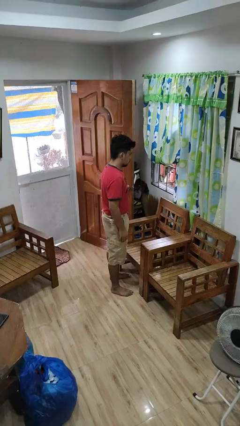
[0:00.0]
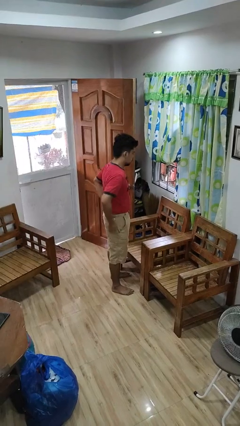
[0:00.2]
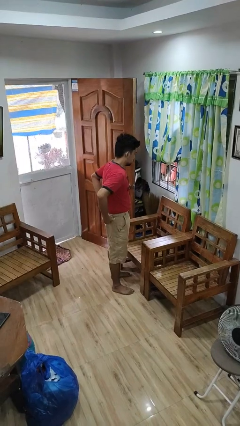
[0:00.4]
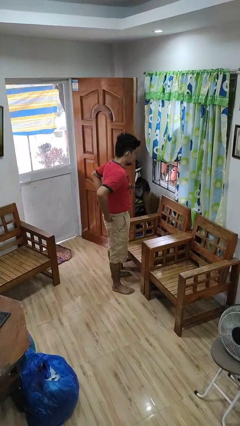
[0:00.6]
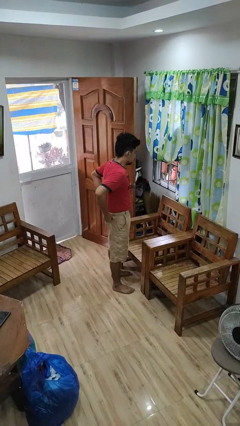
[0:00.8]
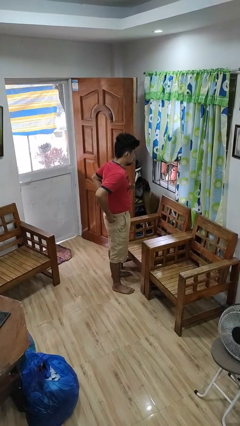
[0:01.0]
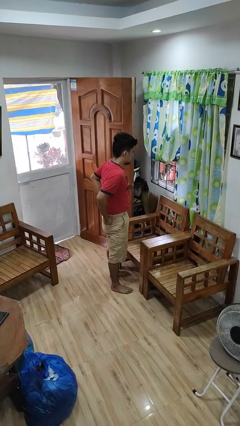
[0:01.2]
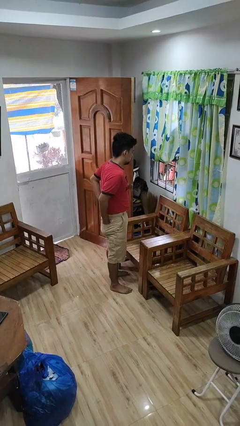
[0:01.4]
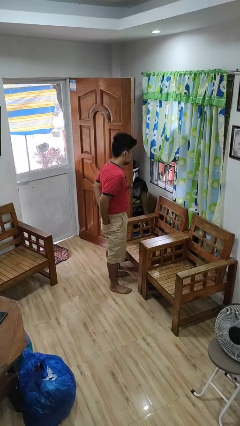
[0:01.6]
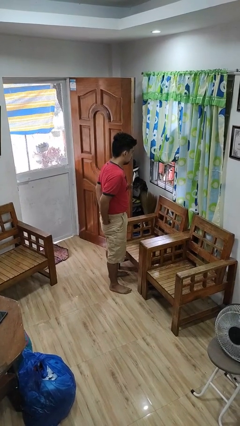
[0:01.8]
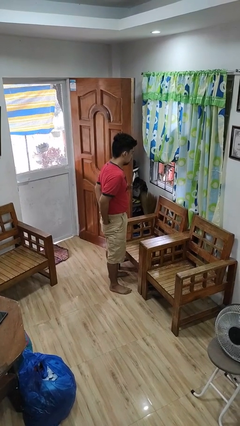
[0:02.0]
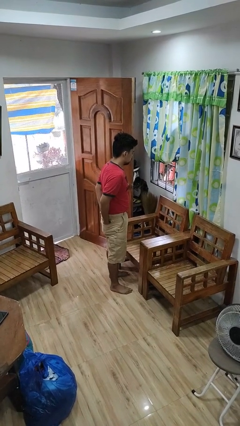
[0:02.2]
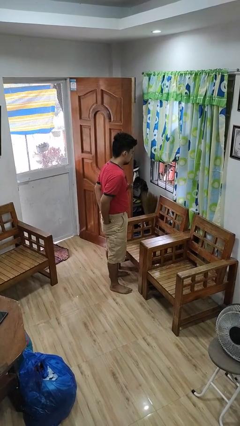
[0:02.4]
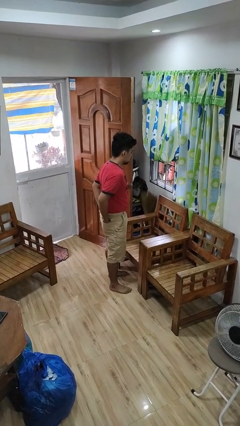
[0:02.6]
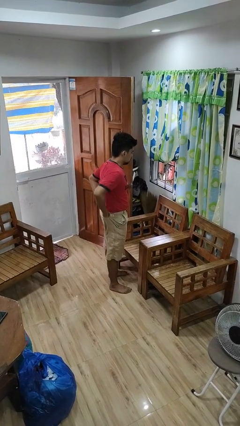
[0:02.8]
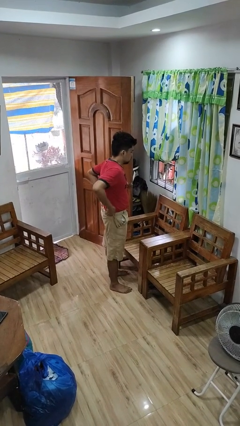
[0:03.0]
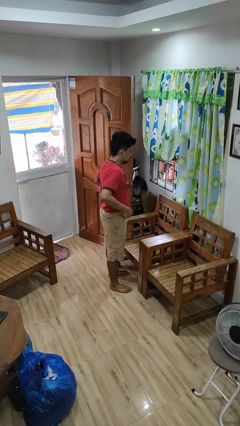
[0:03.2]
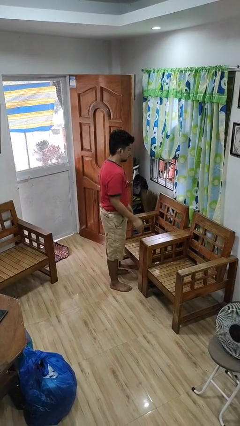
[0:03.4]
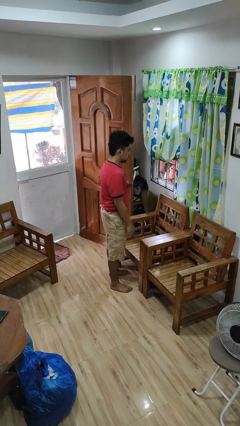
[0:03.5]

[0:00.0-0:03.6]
person puts hands in back pockets

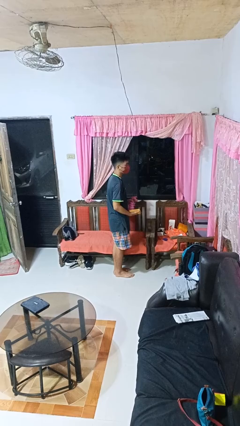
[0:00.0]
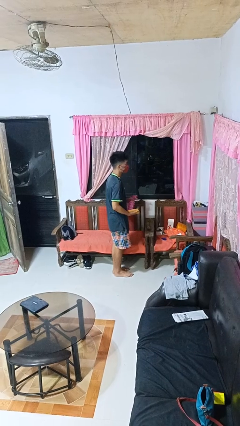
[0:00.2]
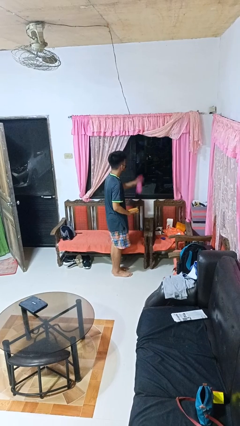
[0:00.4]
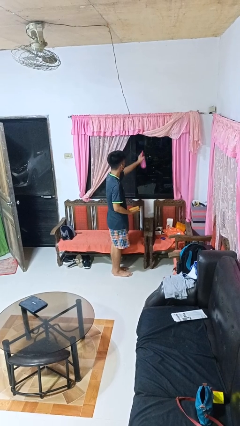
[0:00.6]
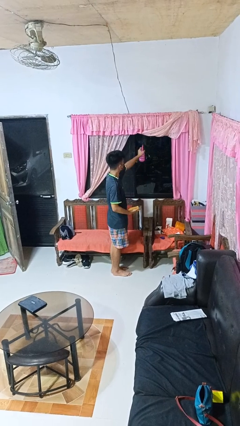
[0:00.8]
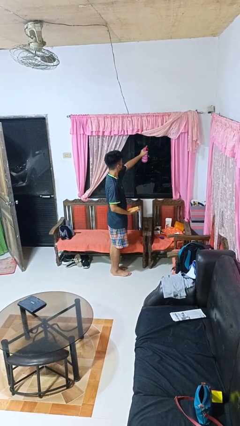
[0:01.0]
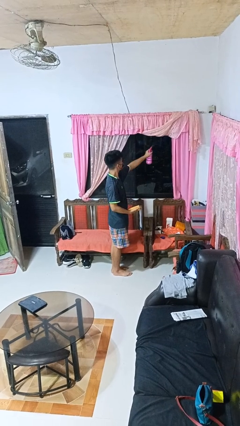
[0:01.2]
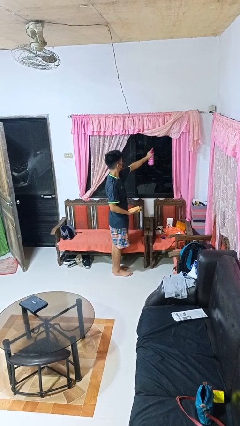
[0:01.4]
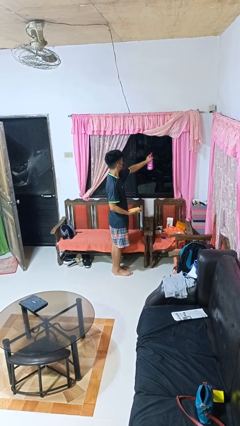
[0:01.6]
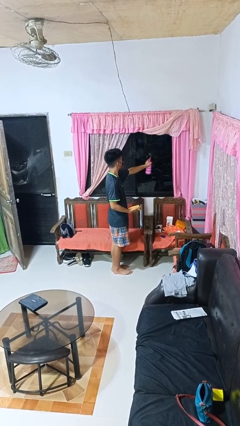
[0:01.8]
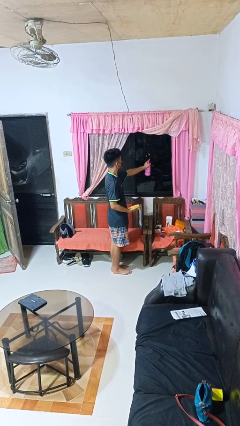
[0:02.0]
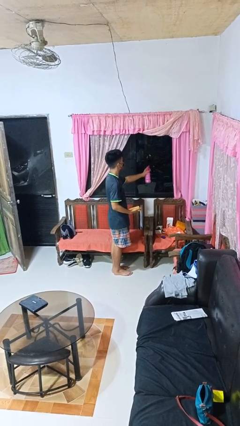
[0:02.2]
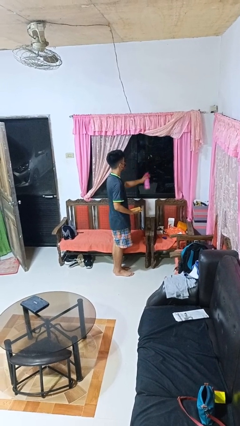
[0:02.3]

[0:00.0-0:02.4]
person sprays from bottle

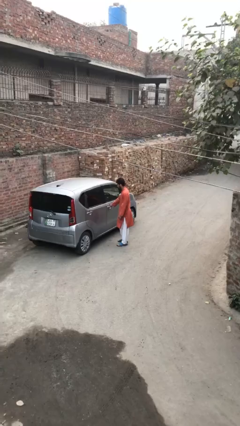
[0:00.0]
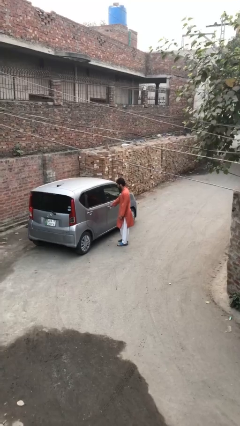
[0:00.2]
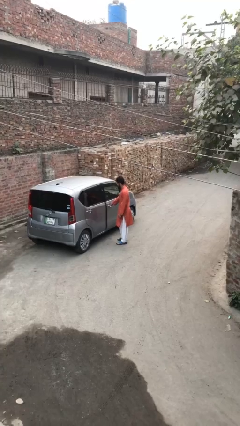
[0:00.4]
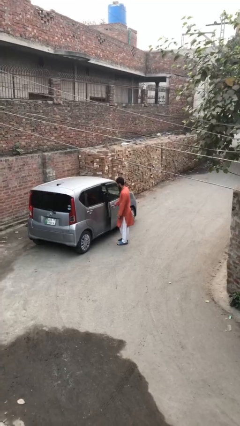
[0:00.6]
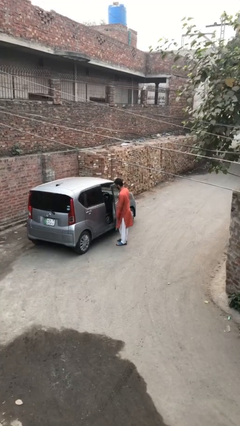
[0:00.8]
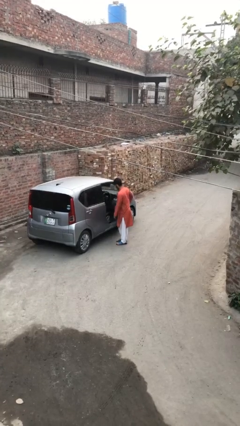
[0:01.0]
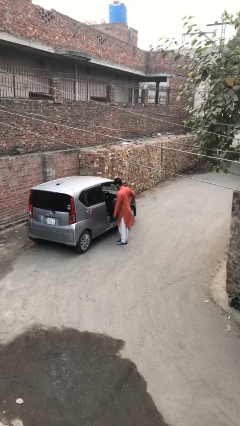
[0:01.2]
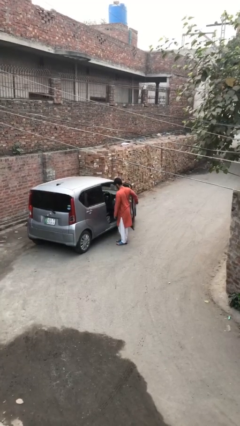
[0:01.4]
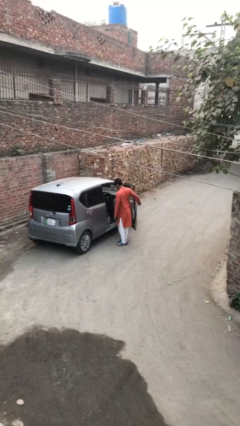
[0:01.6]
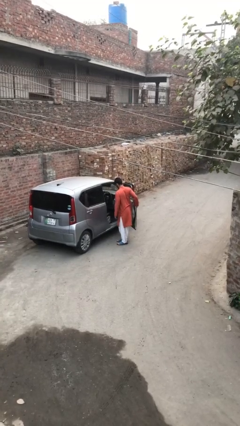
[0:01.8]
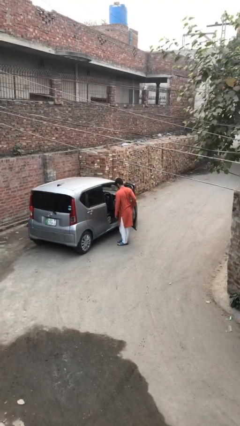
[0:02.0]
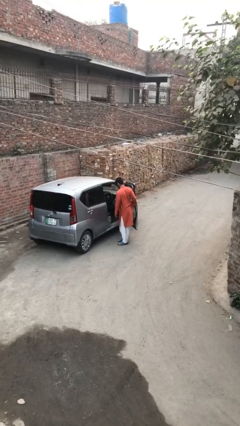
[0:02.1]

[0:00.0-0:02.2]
person opens car door

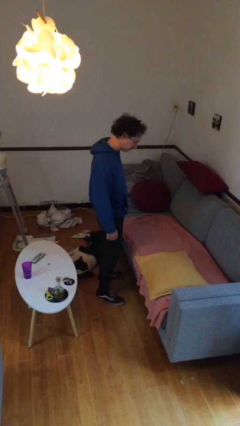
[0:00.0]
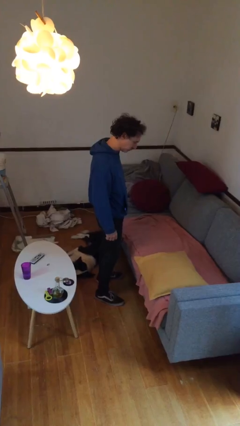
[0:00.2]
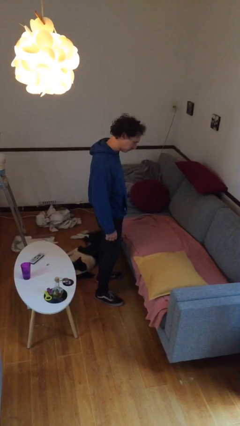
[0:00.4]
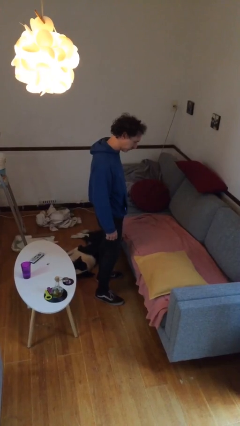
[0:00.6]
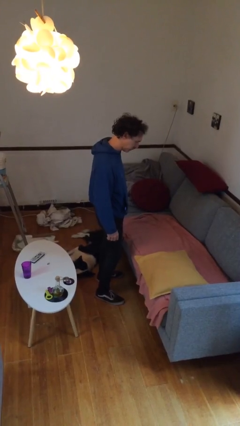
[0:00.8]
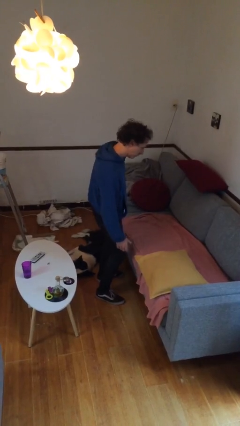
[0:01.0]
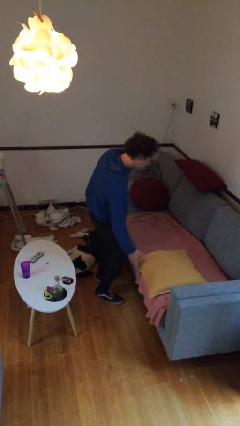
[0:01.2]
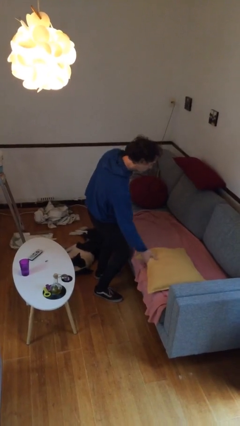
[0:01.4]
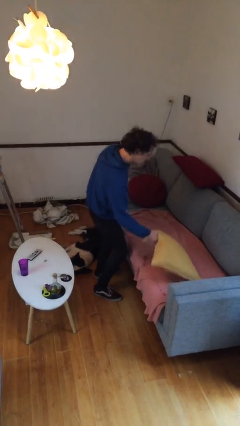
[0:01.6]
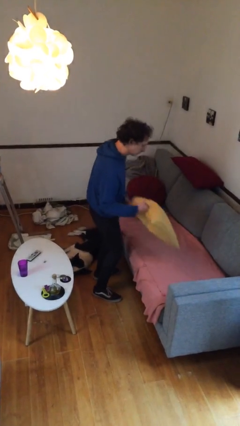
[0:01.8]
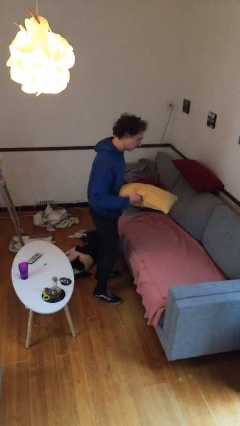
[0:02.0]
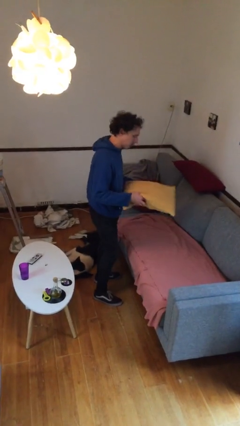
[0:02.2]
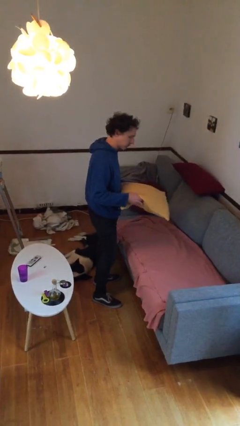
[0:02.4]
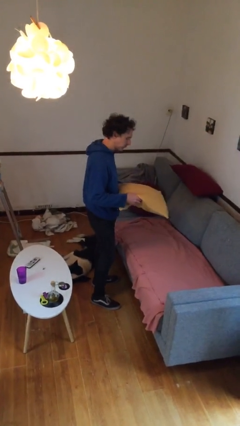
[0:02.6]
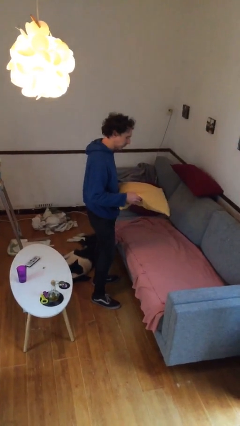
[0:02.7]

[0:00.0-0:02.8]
person picks up object from couch

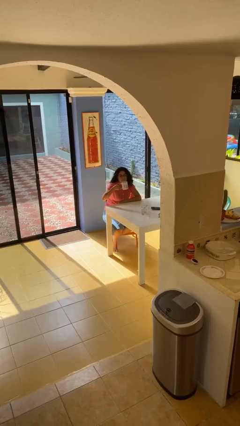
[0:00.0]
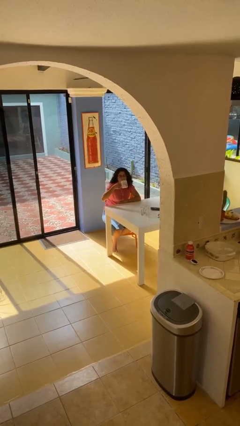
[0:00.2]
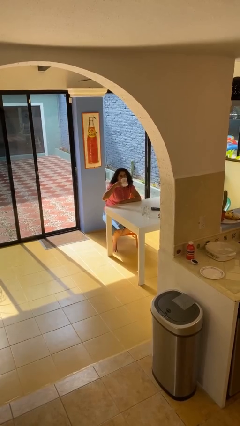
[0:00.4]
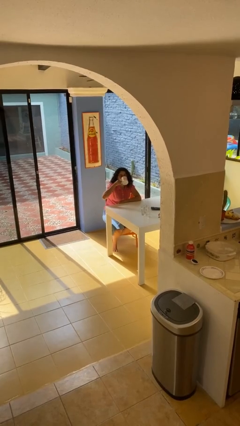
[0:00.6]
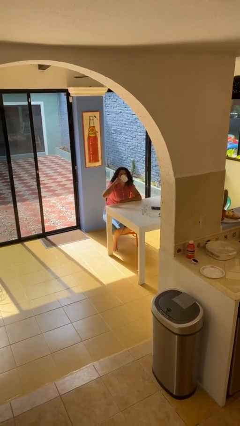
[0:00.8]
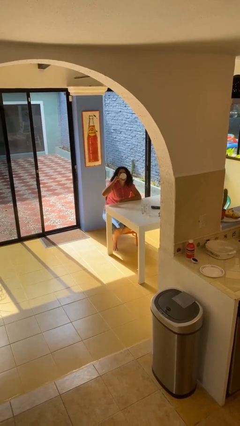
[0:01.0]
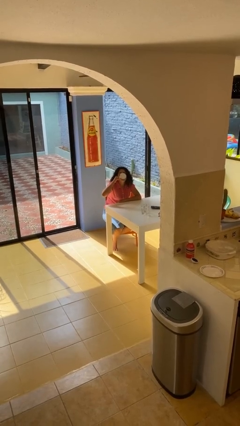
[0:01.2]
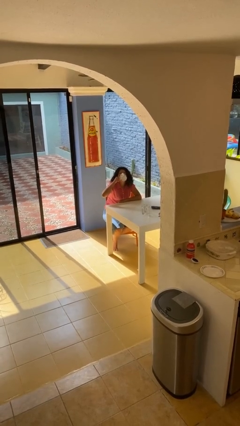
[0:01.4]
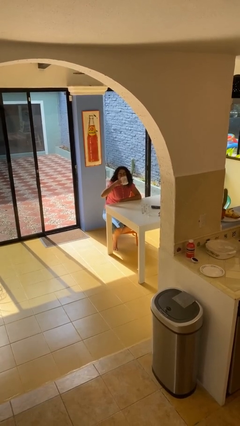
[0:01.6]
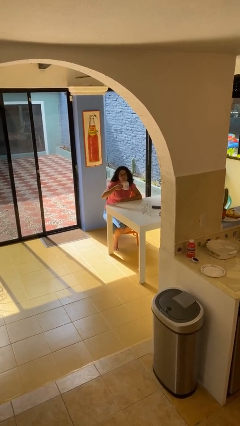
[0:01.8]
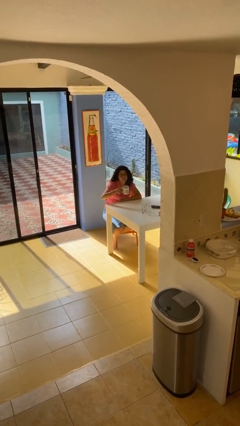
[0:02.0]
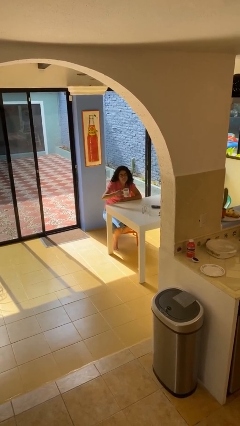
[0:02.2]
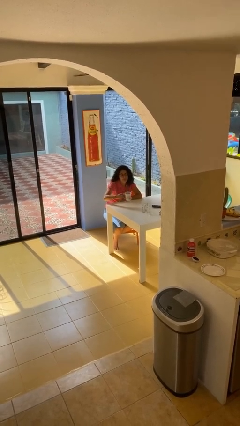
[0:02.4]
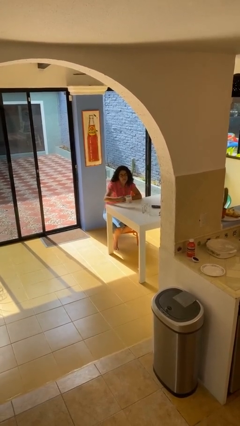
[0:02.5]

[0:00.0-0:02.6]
person drinks from mug

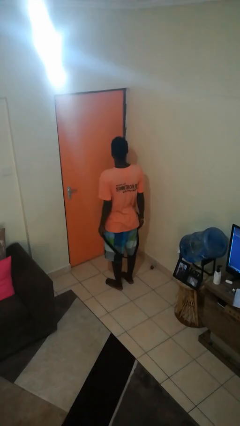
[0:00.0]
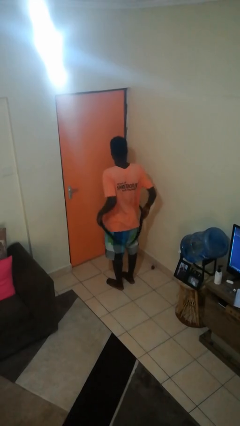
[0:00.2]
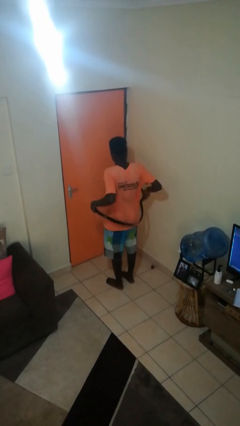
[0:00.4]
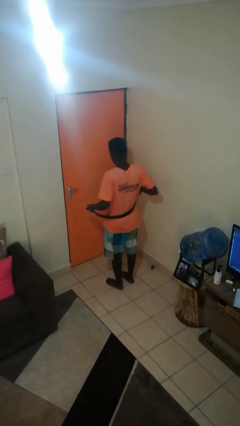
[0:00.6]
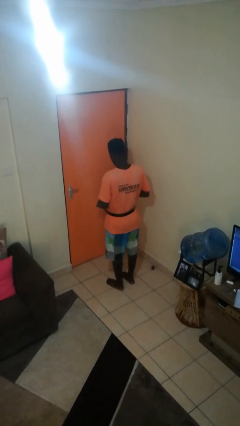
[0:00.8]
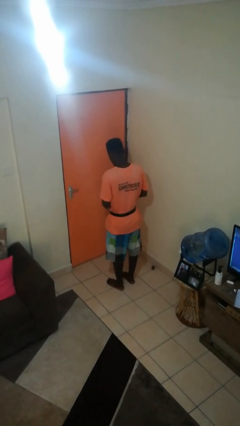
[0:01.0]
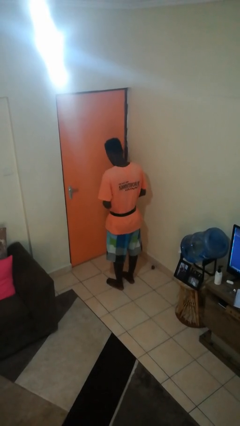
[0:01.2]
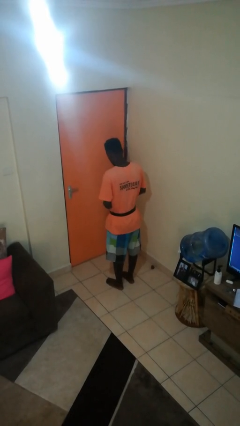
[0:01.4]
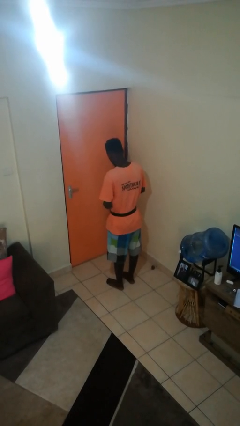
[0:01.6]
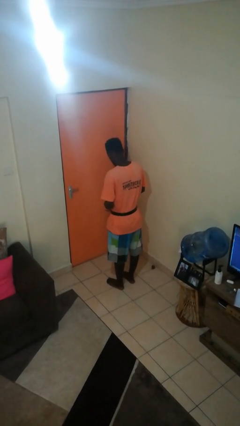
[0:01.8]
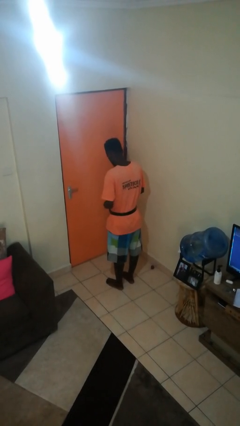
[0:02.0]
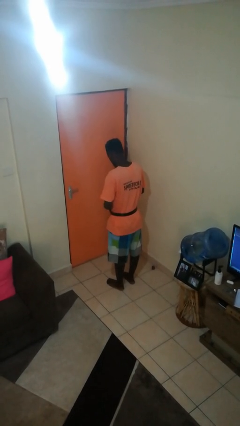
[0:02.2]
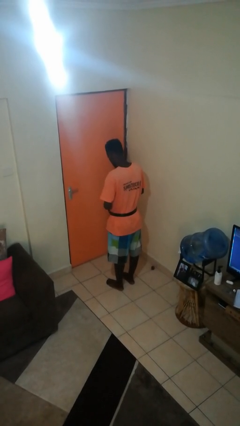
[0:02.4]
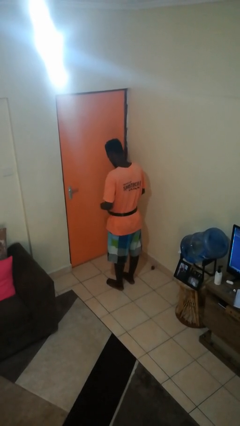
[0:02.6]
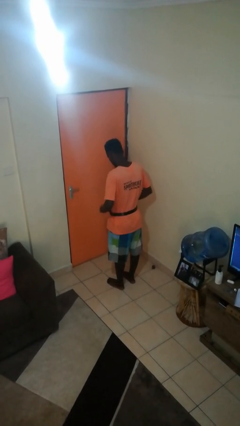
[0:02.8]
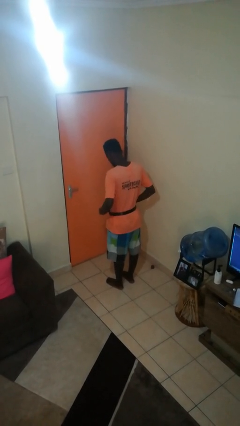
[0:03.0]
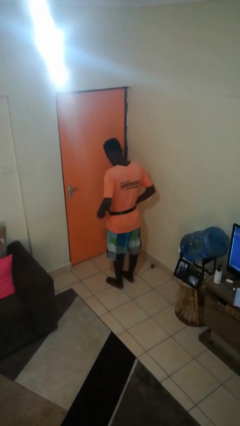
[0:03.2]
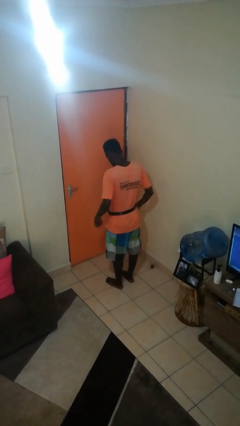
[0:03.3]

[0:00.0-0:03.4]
person puts on belt
